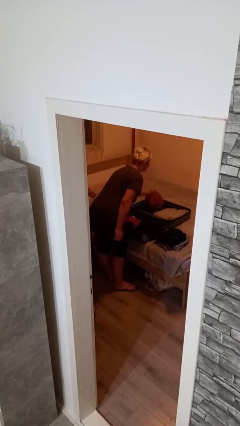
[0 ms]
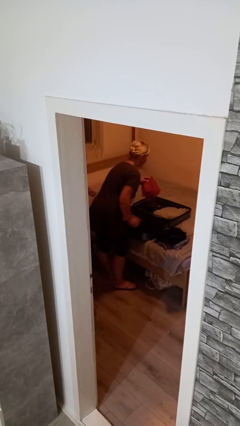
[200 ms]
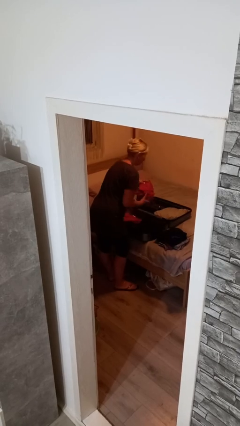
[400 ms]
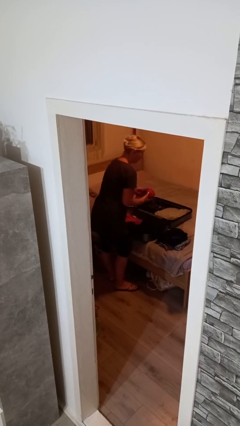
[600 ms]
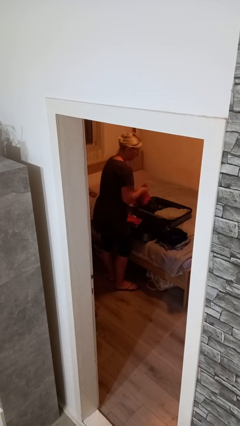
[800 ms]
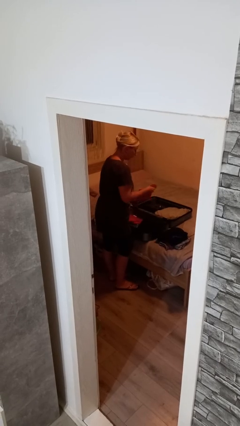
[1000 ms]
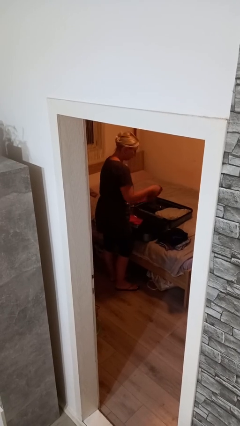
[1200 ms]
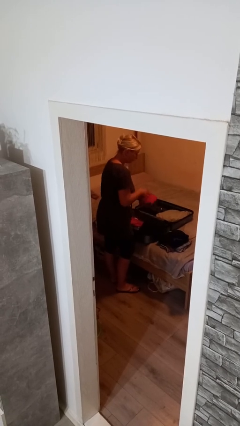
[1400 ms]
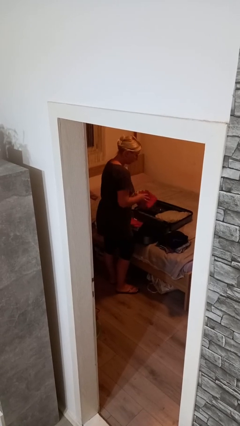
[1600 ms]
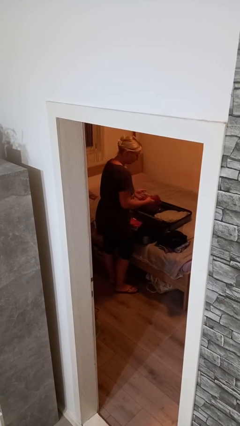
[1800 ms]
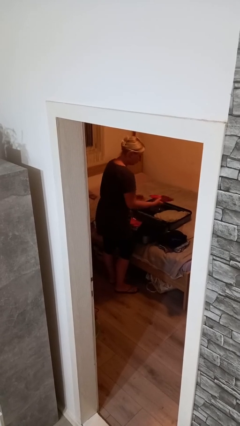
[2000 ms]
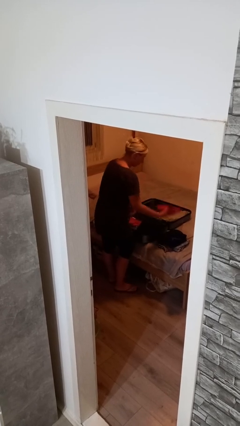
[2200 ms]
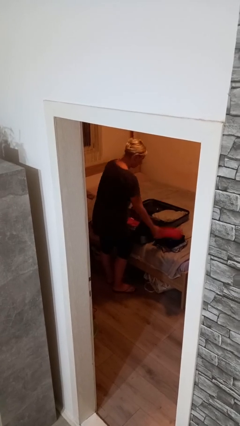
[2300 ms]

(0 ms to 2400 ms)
person unloads clothes from suitcase

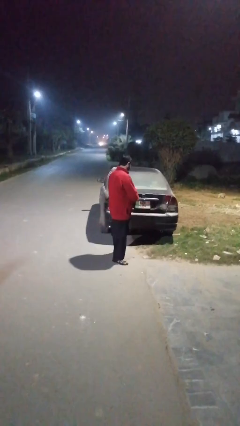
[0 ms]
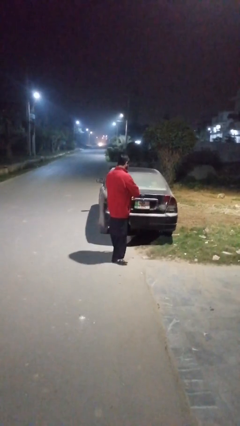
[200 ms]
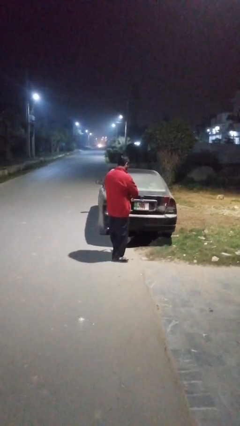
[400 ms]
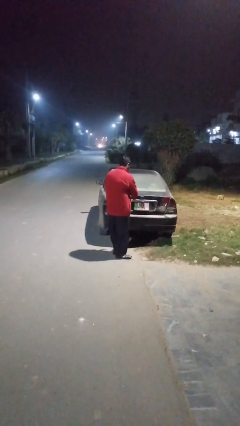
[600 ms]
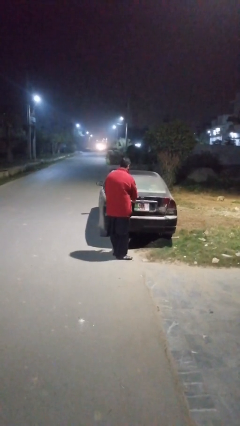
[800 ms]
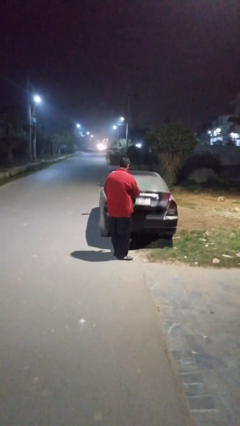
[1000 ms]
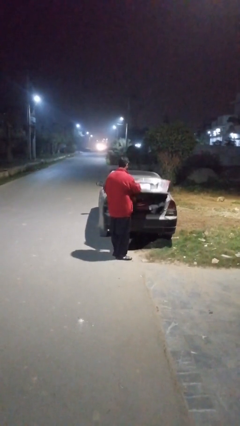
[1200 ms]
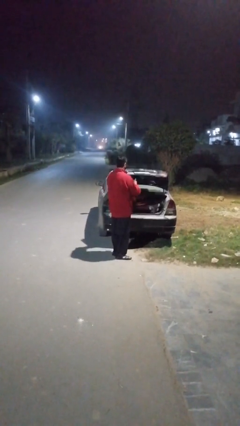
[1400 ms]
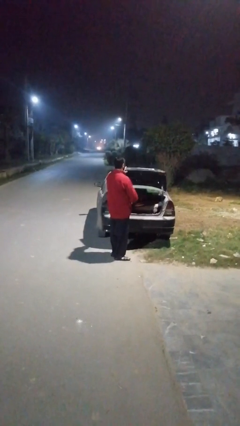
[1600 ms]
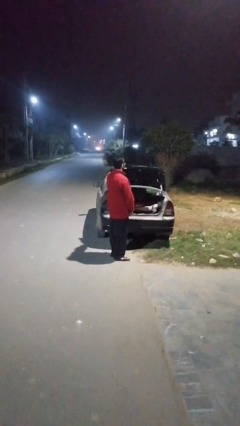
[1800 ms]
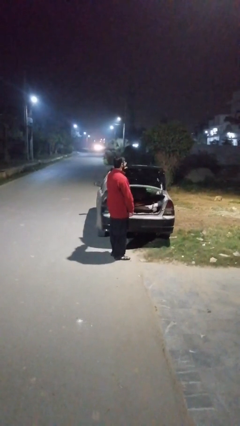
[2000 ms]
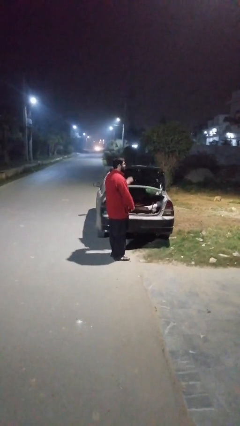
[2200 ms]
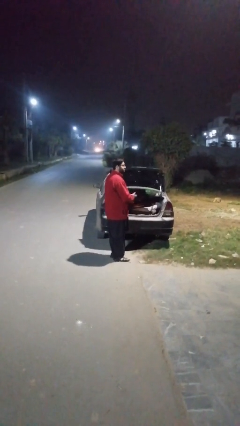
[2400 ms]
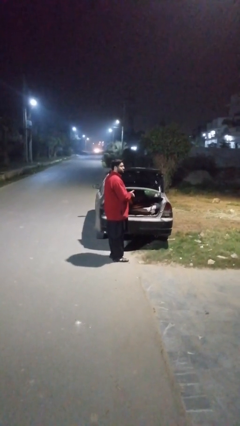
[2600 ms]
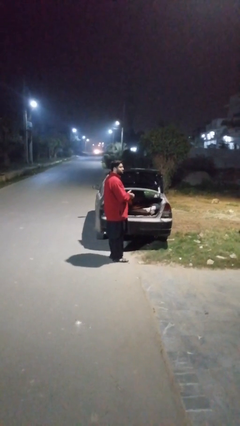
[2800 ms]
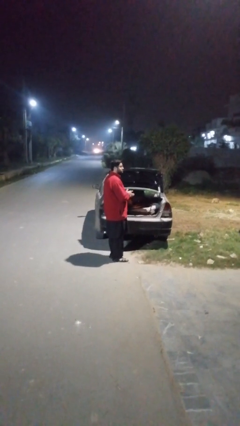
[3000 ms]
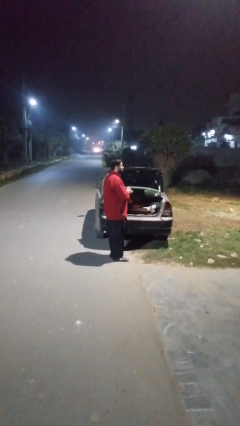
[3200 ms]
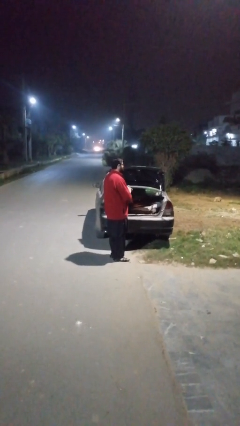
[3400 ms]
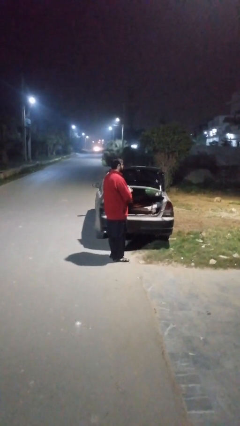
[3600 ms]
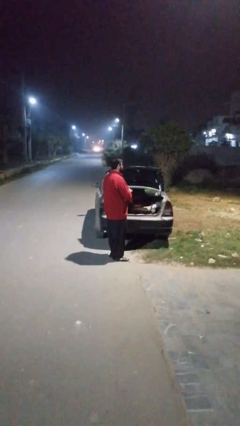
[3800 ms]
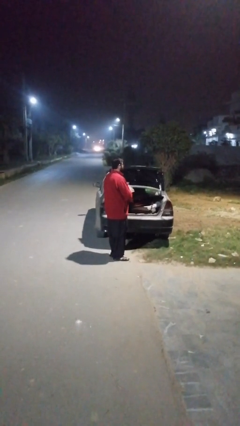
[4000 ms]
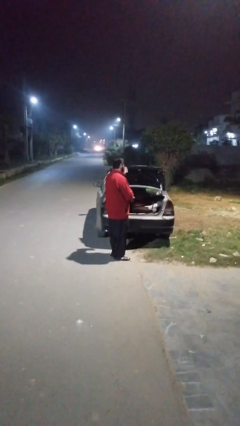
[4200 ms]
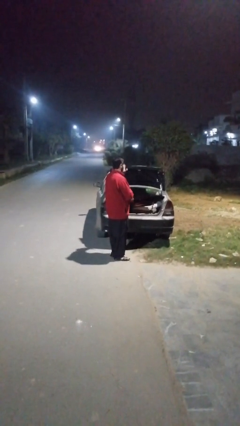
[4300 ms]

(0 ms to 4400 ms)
person opens car trunk

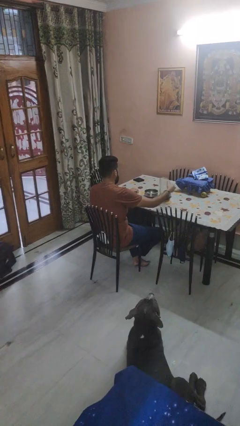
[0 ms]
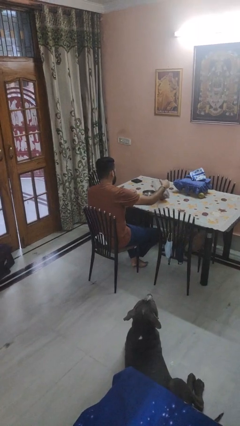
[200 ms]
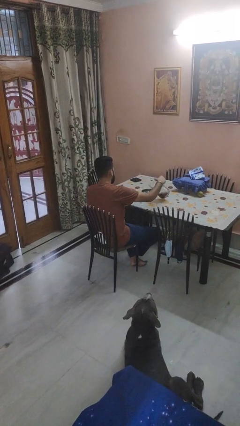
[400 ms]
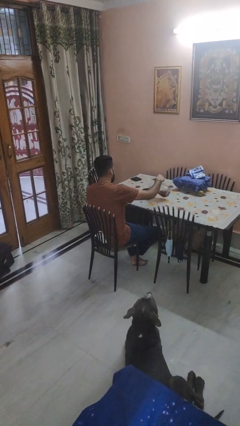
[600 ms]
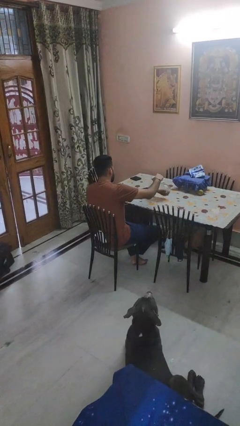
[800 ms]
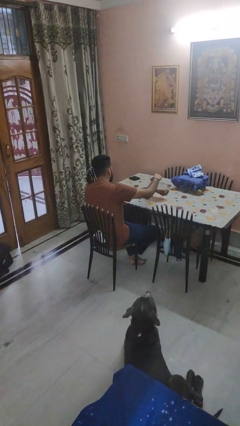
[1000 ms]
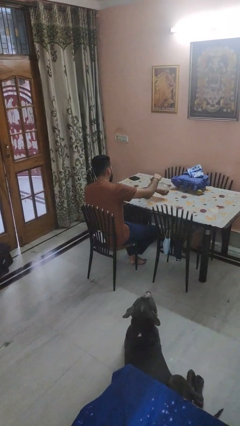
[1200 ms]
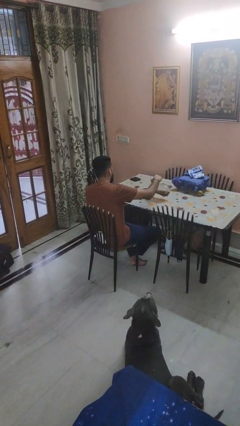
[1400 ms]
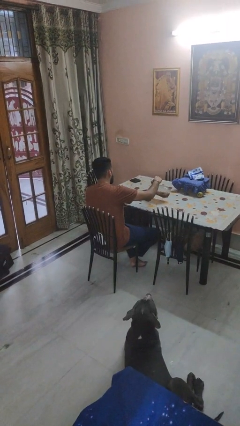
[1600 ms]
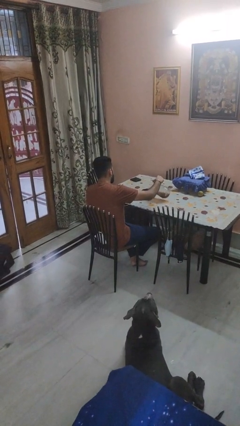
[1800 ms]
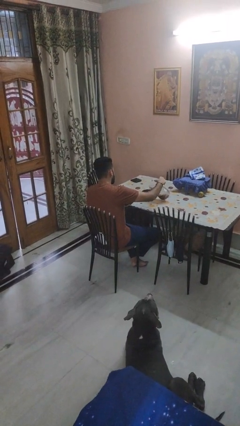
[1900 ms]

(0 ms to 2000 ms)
person pours into bowl

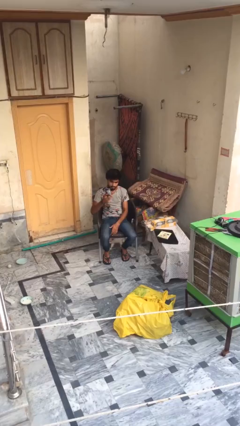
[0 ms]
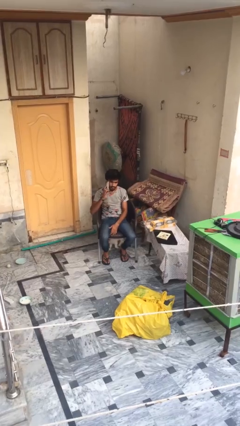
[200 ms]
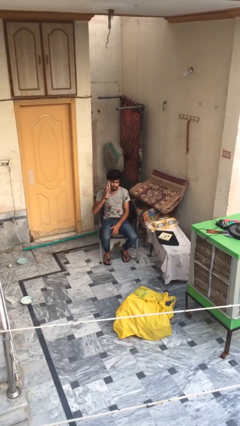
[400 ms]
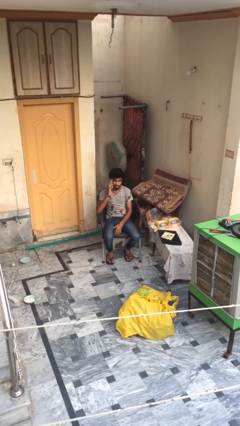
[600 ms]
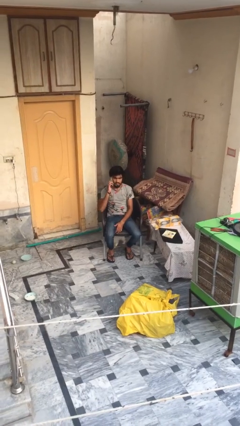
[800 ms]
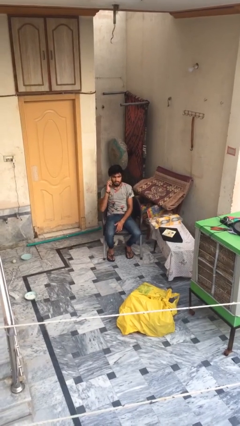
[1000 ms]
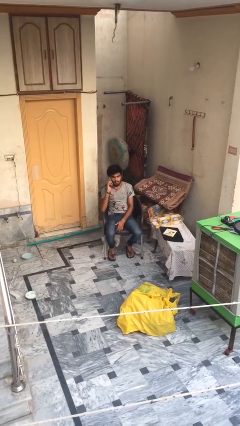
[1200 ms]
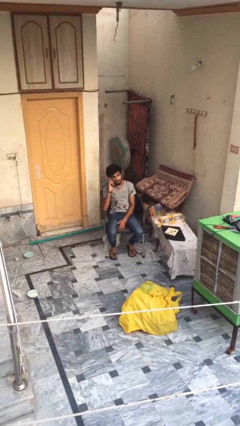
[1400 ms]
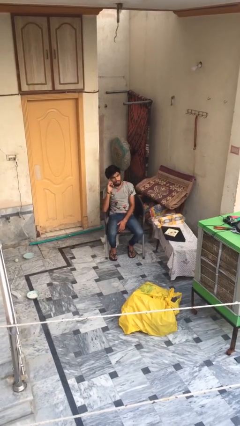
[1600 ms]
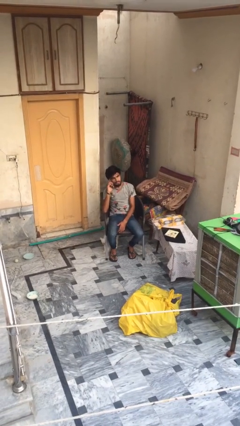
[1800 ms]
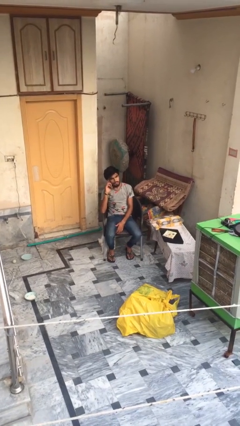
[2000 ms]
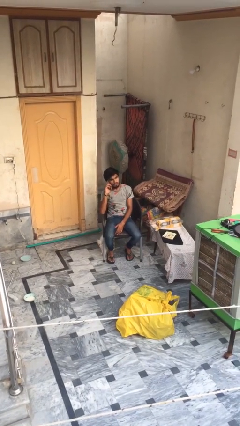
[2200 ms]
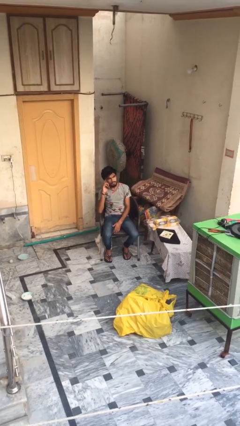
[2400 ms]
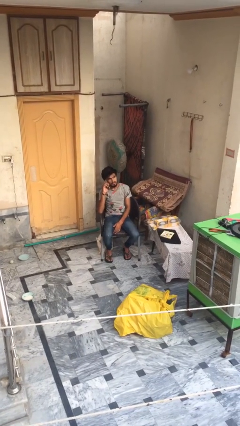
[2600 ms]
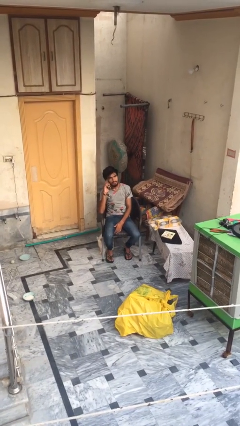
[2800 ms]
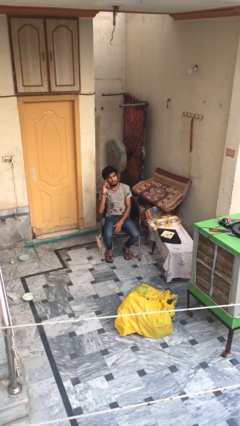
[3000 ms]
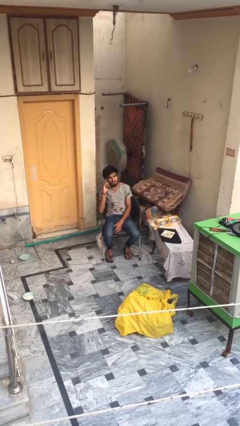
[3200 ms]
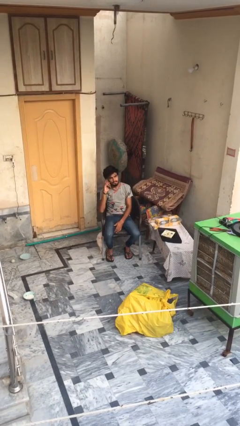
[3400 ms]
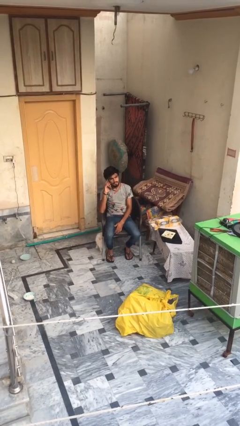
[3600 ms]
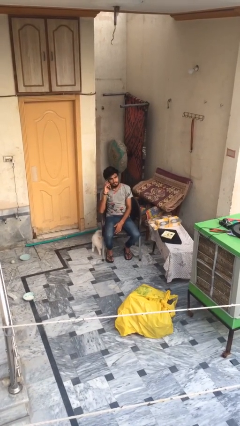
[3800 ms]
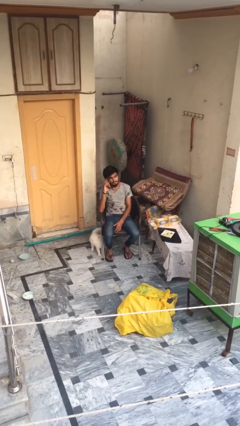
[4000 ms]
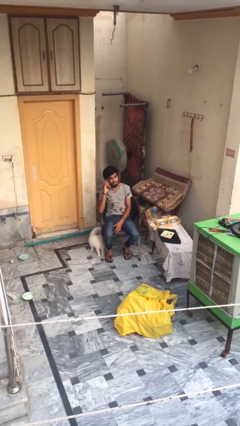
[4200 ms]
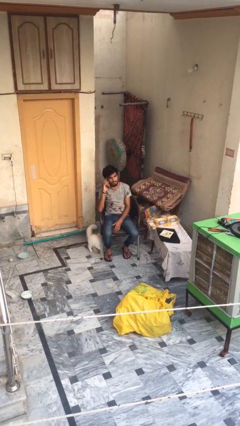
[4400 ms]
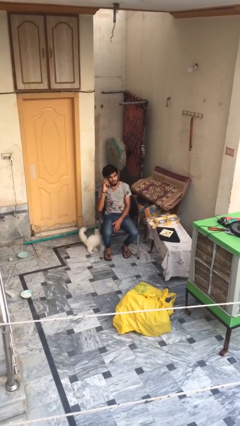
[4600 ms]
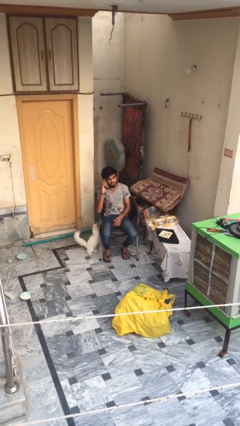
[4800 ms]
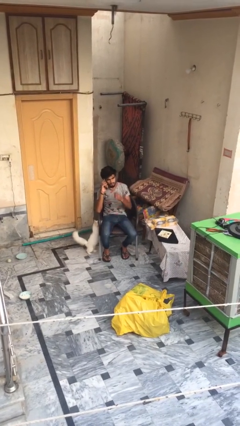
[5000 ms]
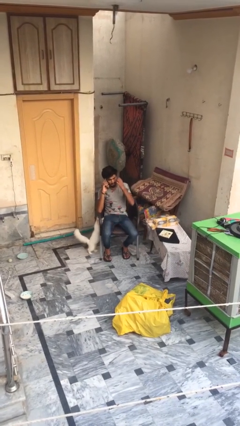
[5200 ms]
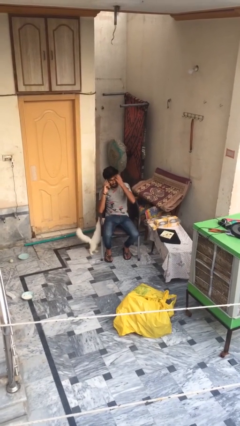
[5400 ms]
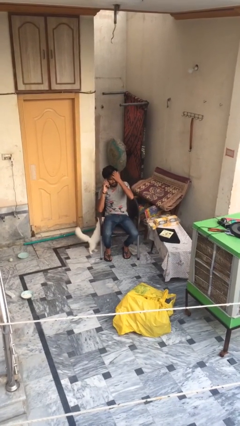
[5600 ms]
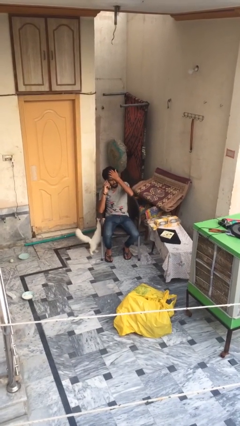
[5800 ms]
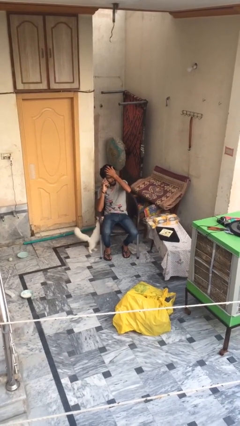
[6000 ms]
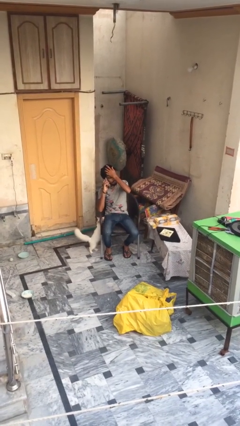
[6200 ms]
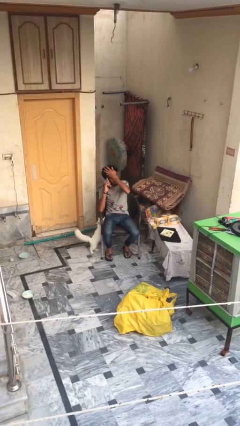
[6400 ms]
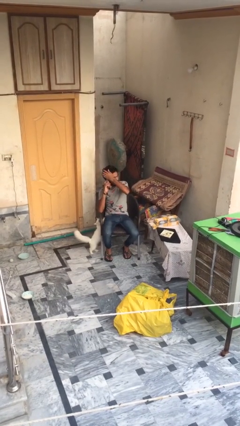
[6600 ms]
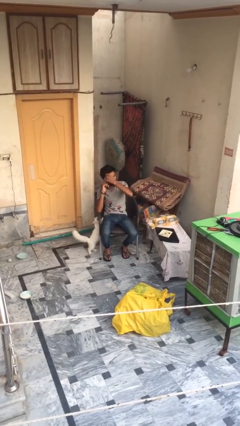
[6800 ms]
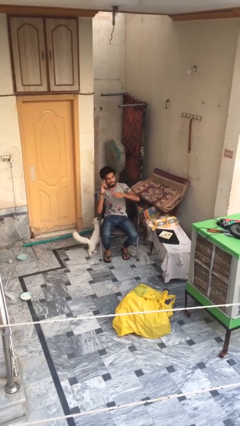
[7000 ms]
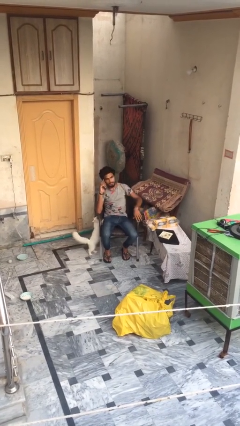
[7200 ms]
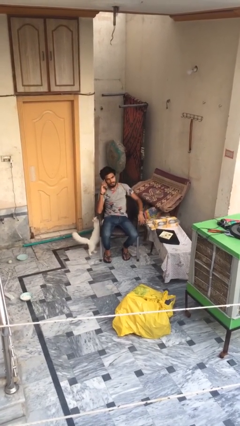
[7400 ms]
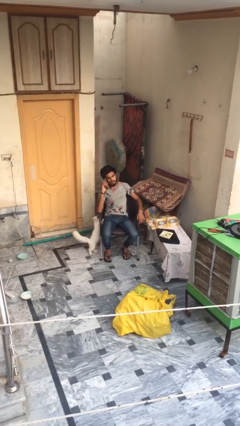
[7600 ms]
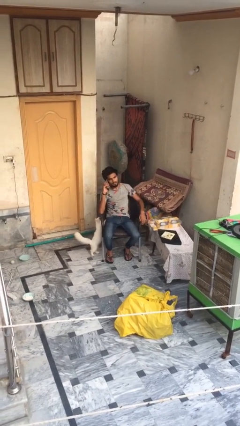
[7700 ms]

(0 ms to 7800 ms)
person talks on phone

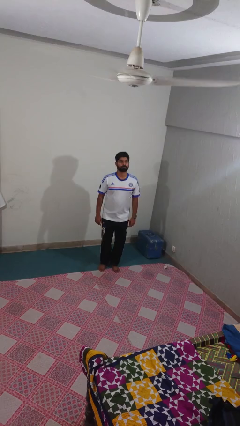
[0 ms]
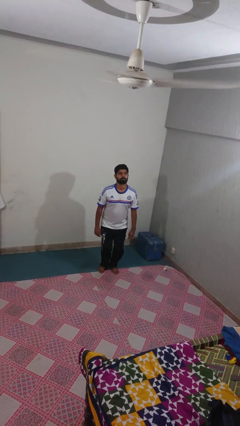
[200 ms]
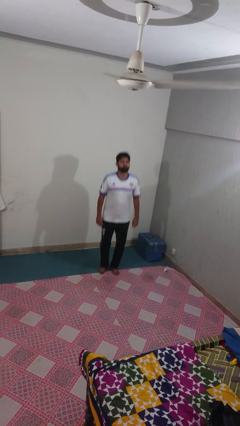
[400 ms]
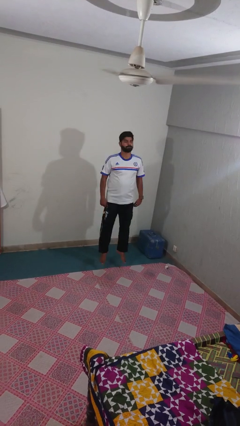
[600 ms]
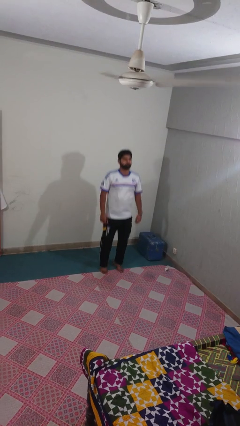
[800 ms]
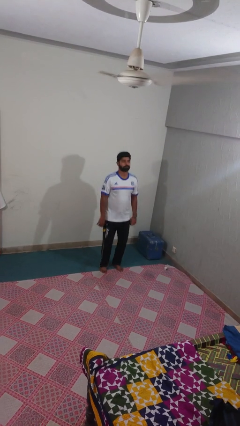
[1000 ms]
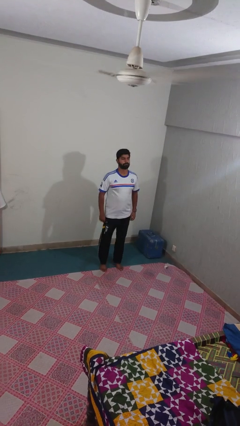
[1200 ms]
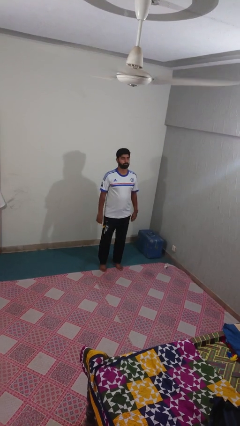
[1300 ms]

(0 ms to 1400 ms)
person jumps
